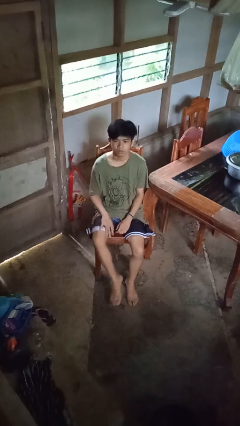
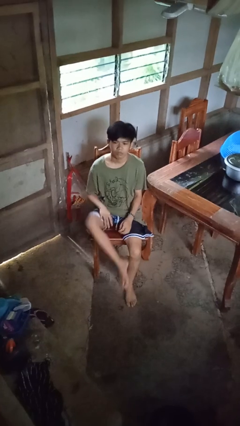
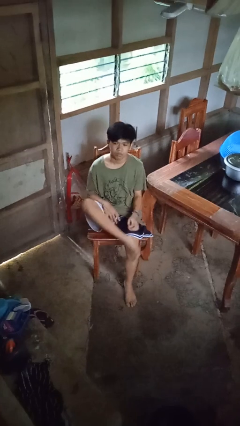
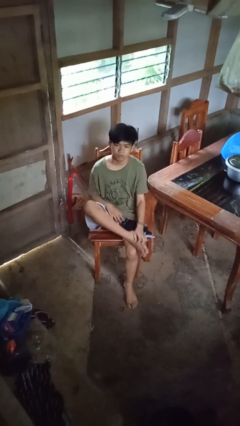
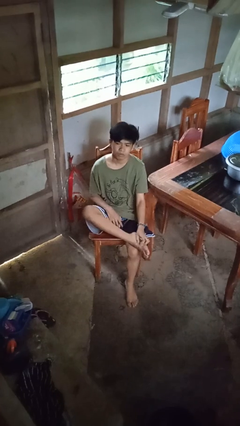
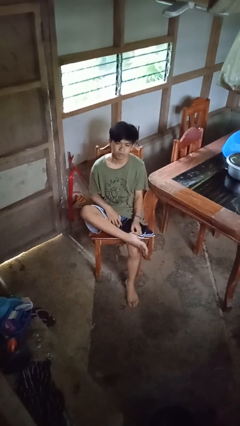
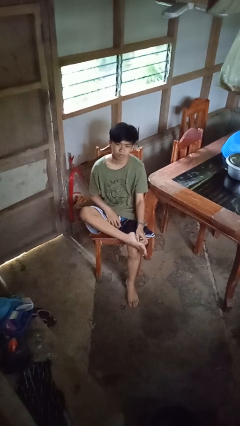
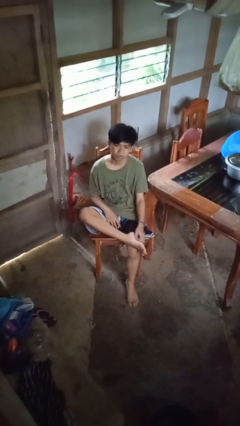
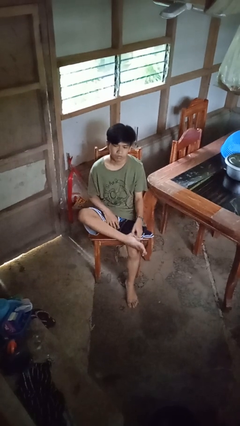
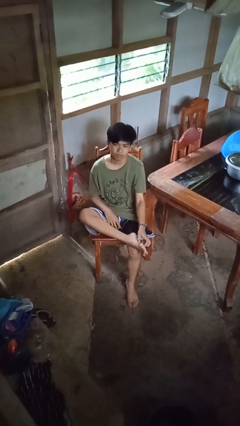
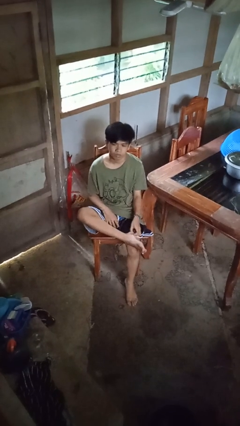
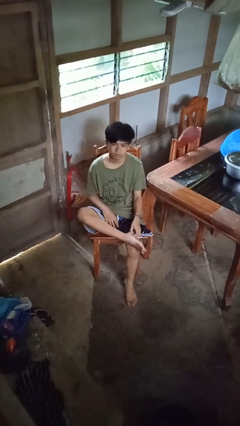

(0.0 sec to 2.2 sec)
person rubs foot

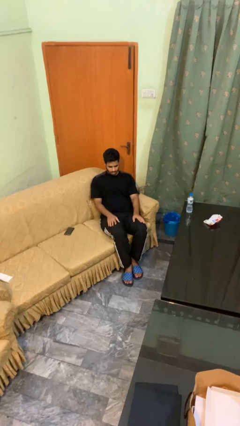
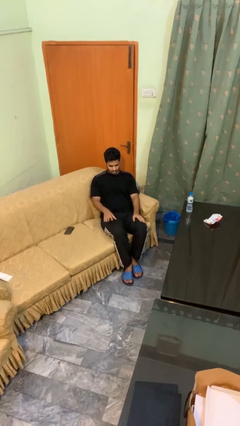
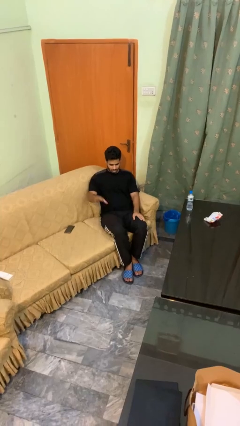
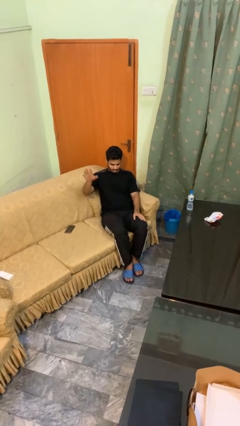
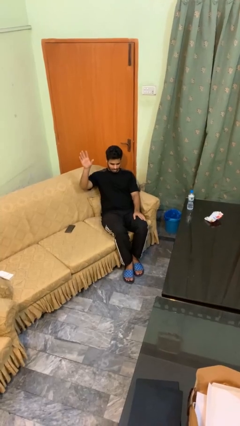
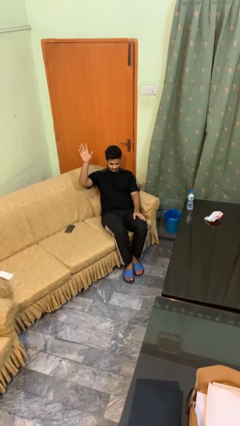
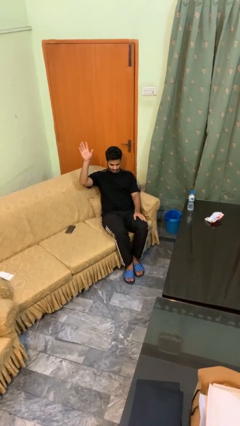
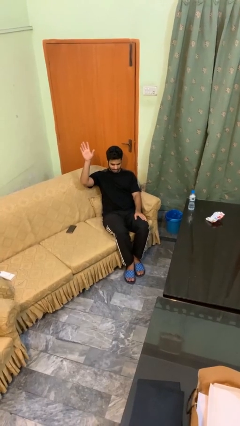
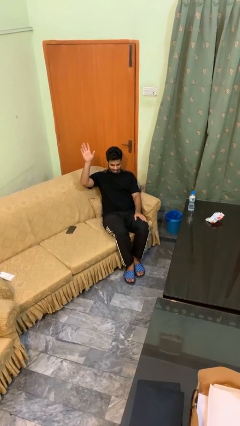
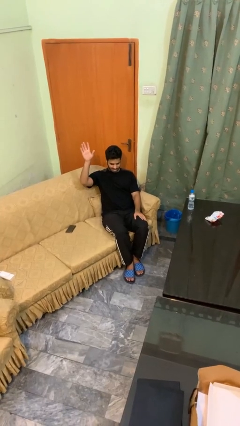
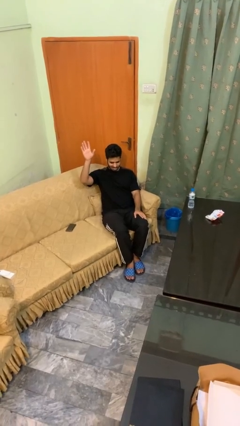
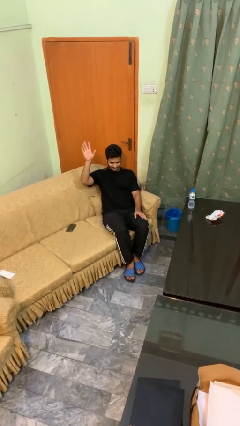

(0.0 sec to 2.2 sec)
person gestures raise hand

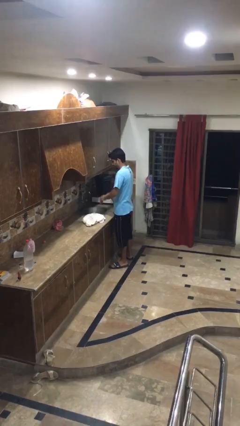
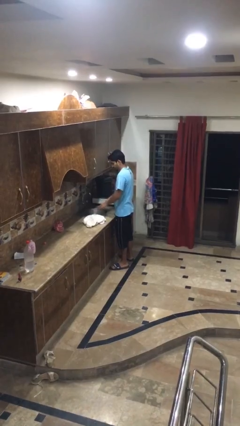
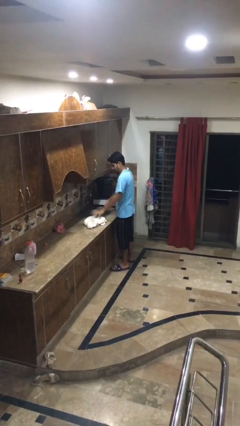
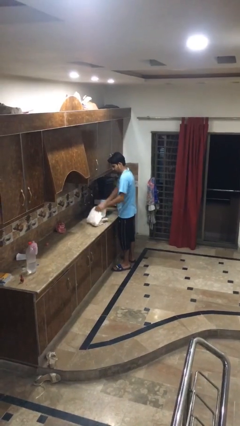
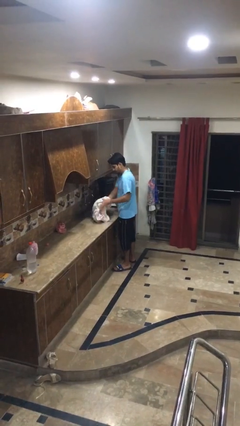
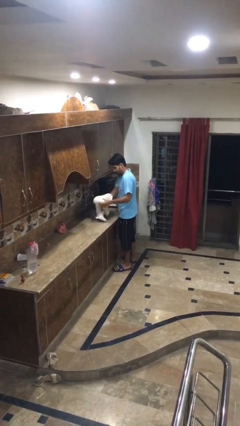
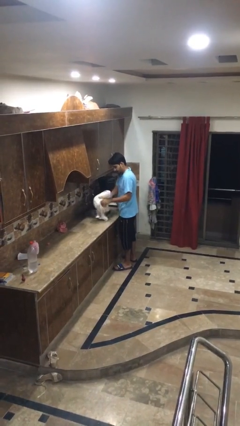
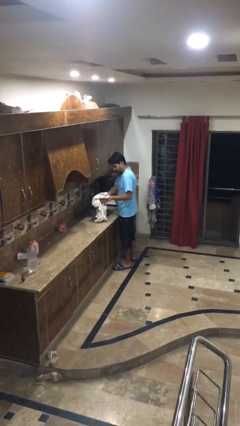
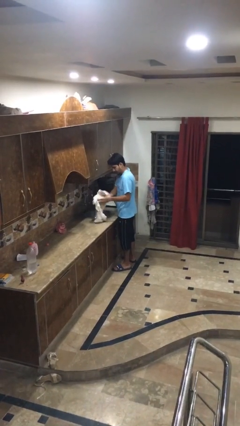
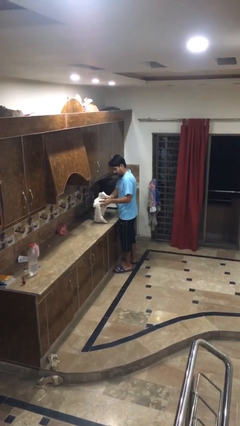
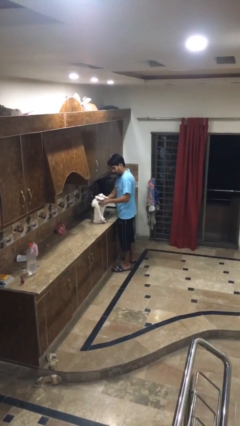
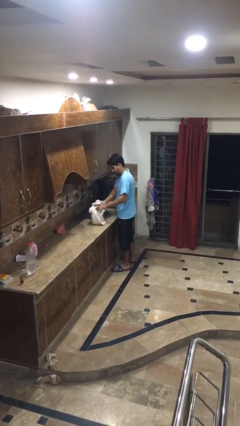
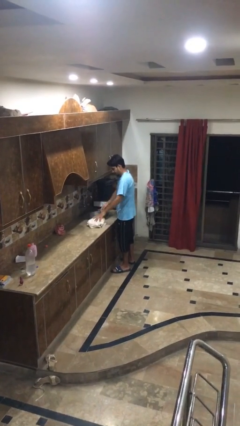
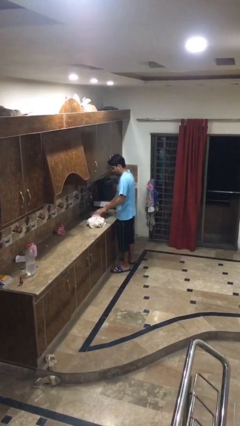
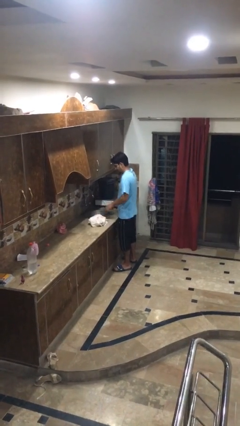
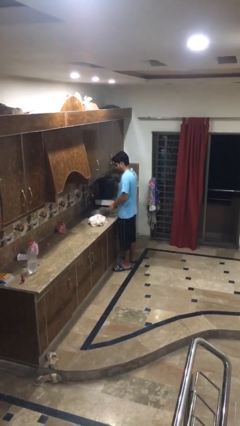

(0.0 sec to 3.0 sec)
person dries hands with towel

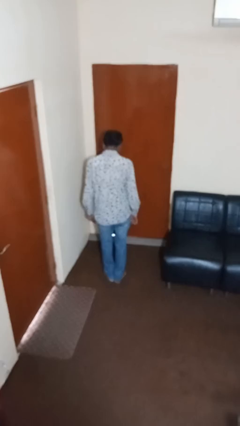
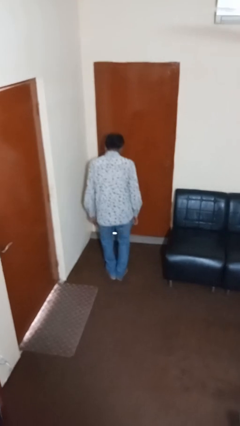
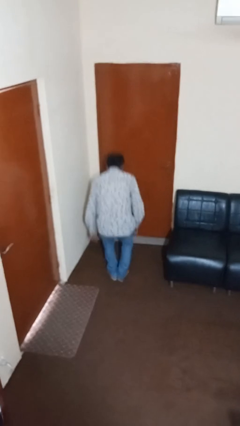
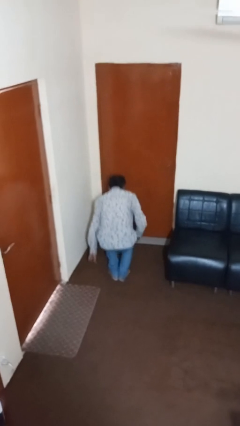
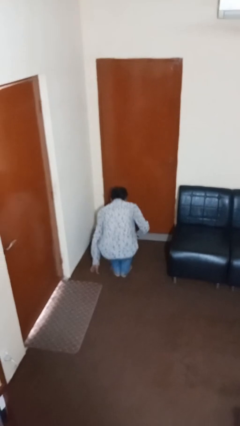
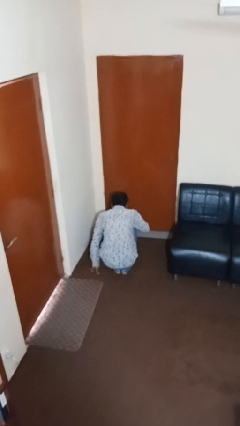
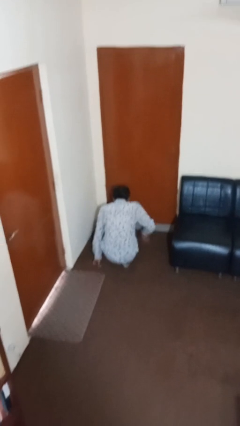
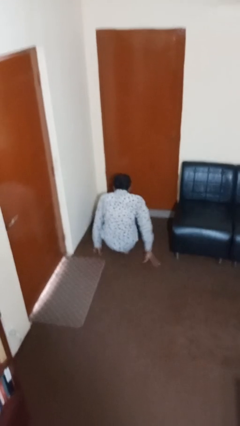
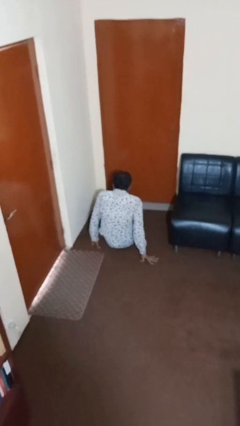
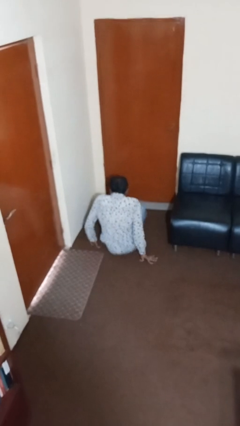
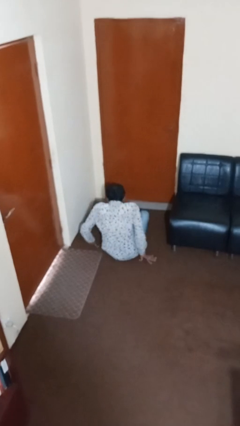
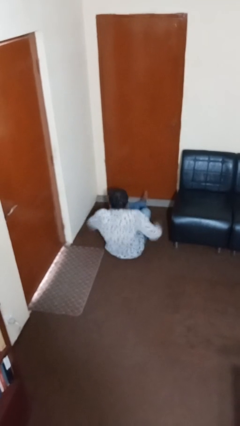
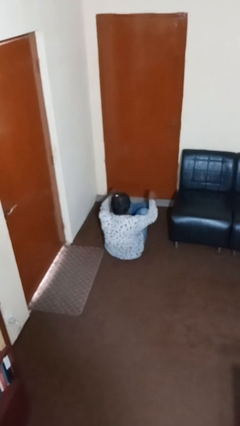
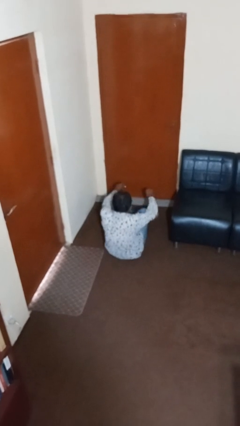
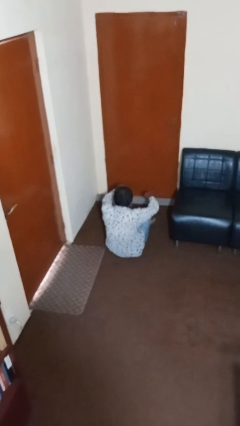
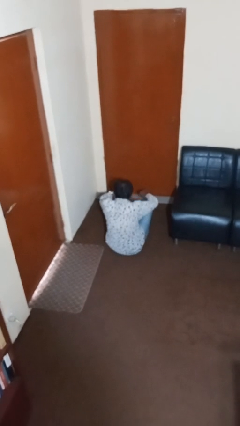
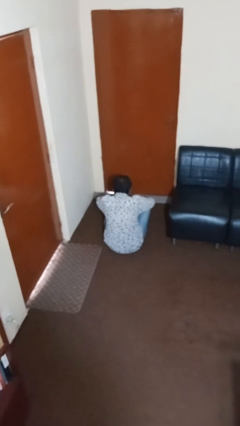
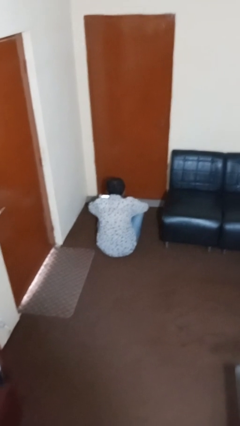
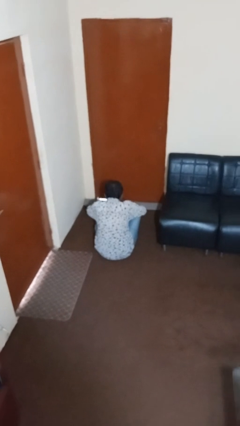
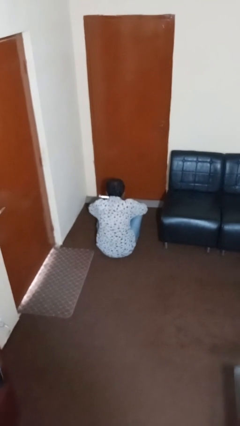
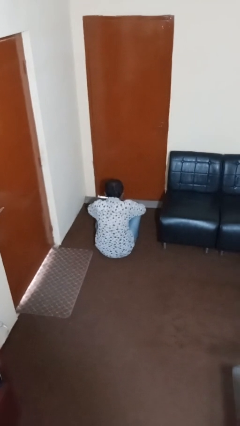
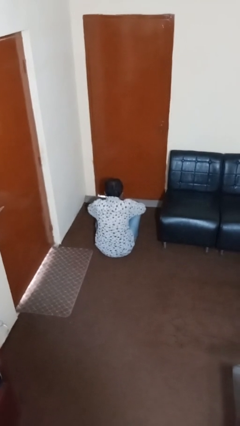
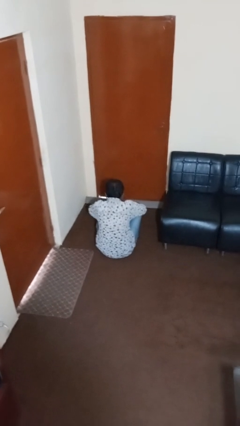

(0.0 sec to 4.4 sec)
person sits crisscross

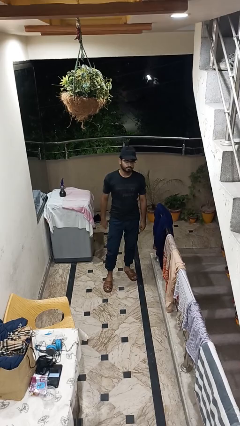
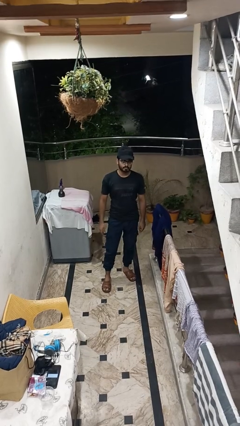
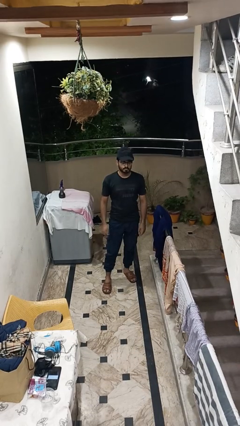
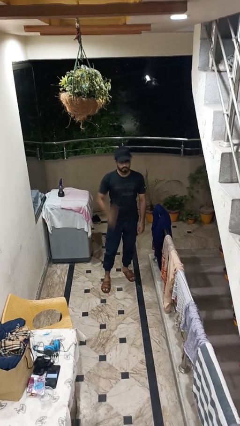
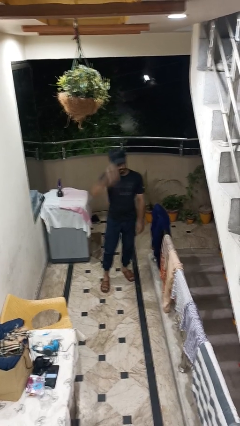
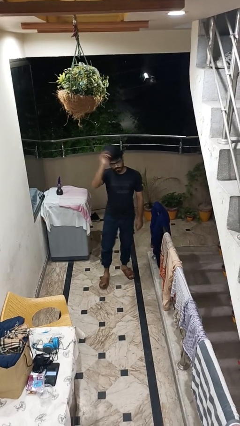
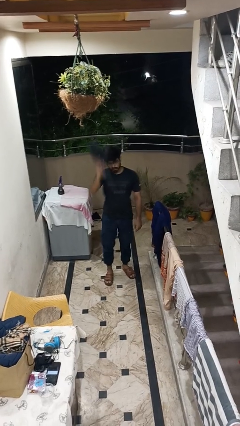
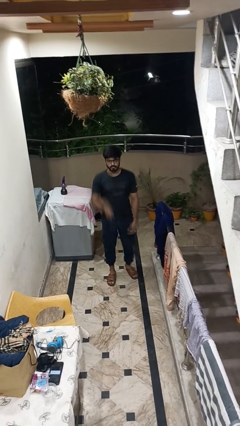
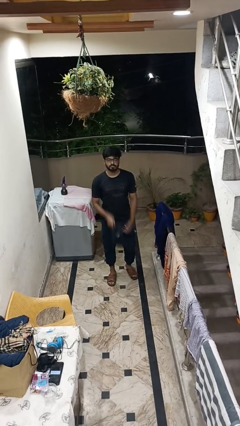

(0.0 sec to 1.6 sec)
person takes off hat

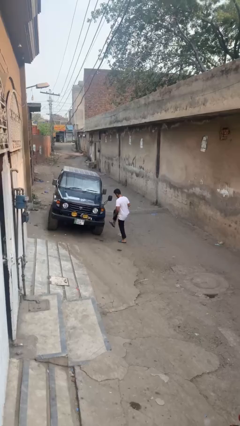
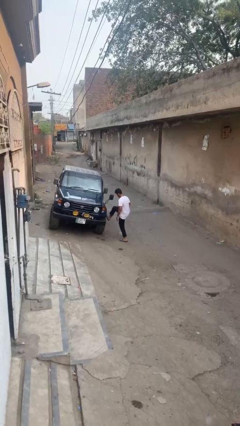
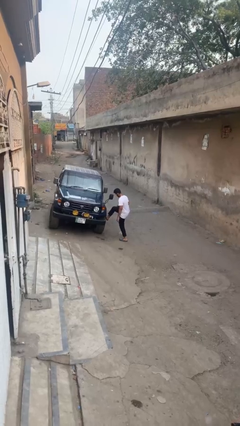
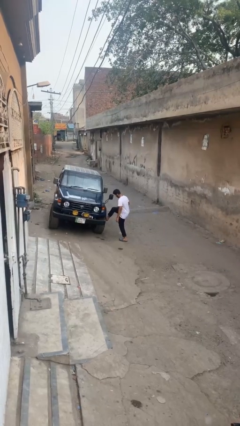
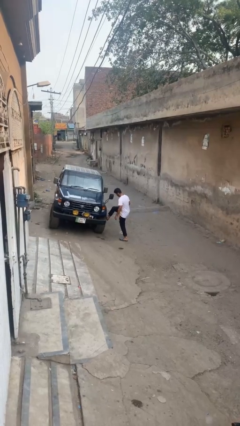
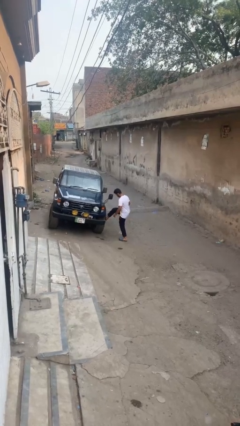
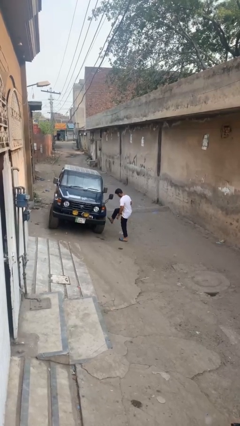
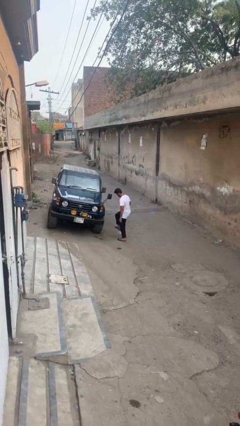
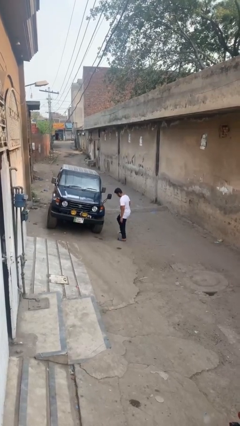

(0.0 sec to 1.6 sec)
person kicks car tires

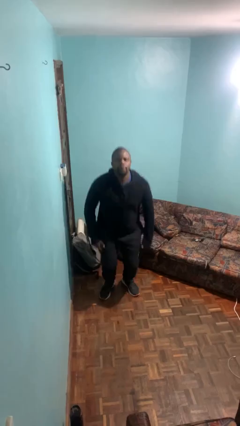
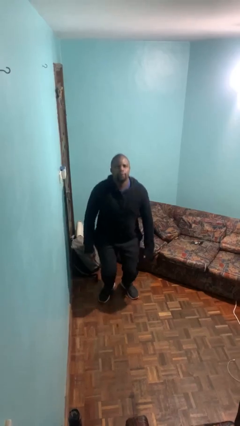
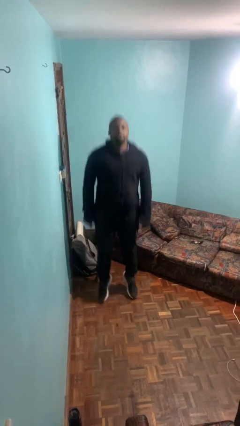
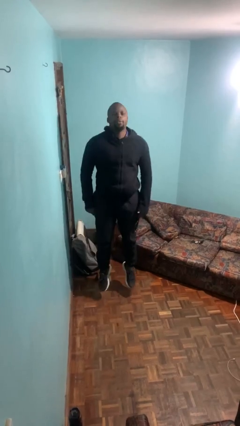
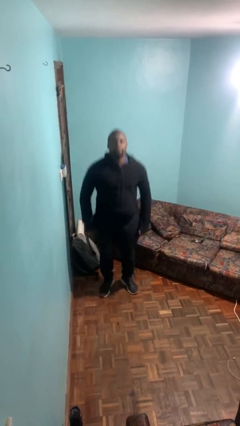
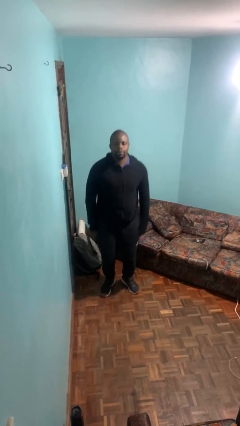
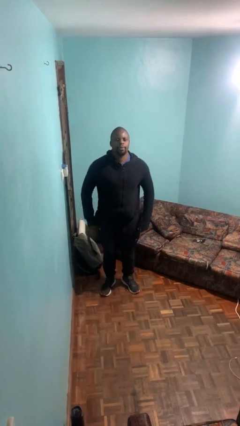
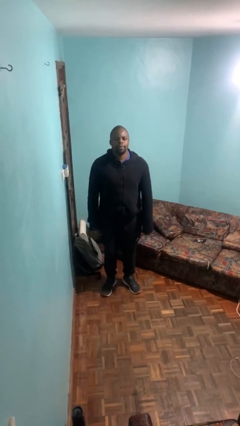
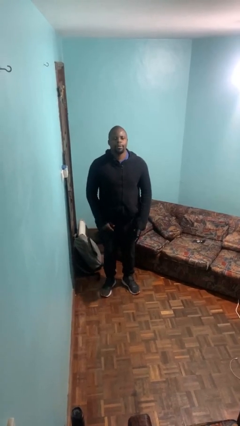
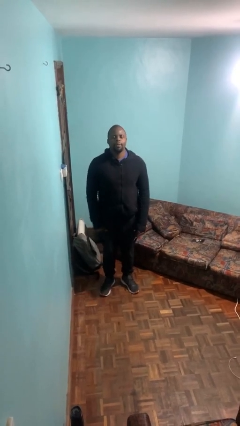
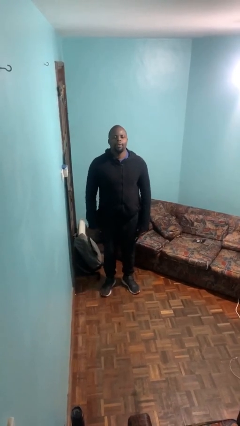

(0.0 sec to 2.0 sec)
person jumps
